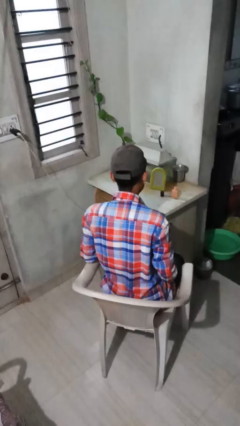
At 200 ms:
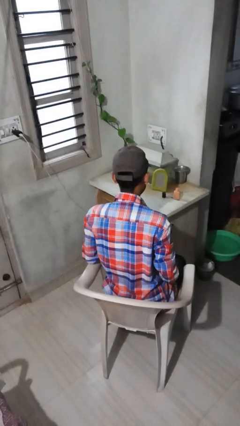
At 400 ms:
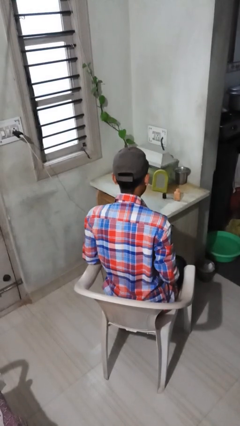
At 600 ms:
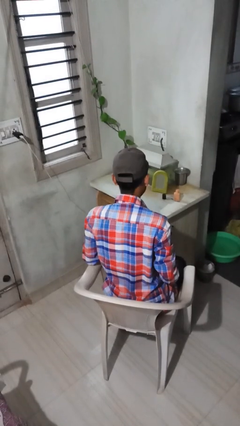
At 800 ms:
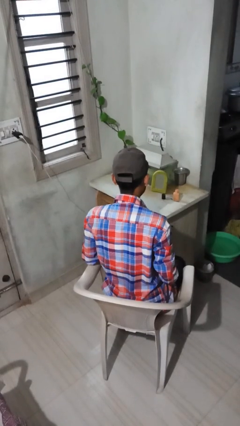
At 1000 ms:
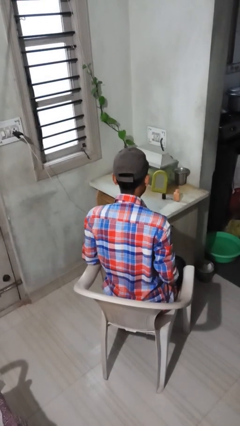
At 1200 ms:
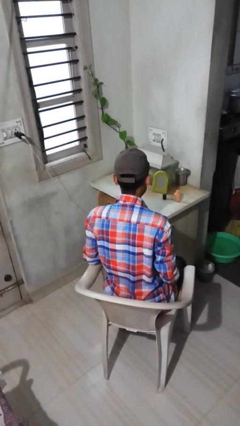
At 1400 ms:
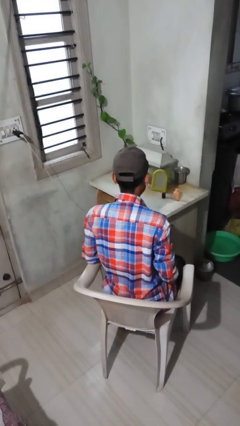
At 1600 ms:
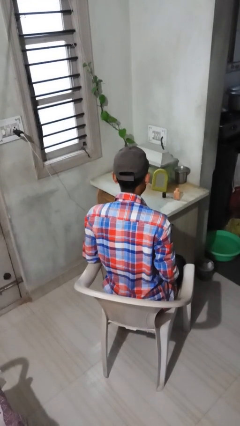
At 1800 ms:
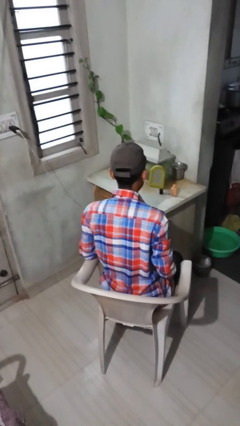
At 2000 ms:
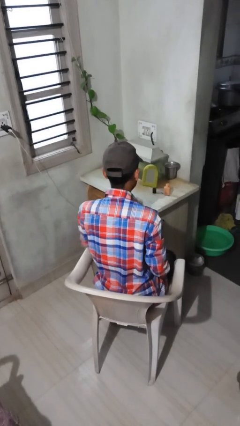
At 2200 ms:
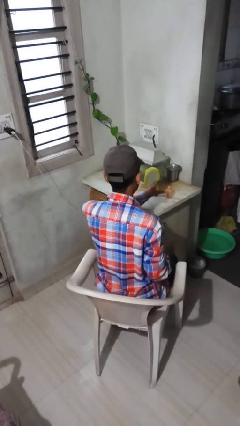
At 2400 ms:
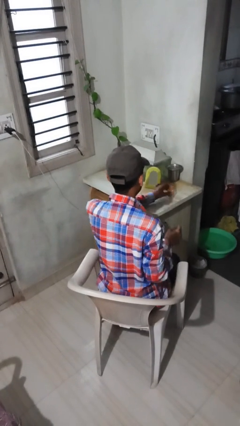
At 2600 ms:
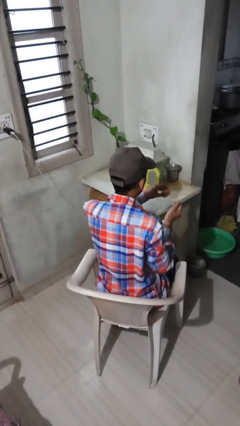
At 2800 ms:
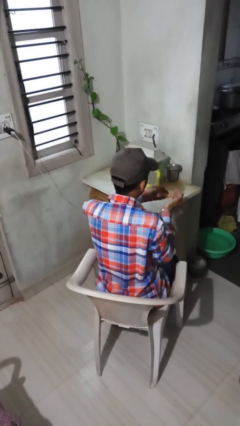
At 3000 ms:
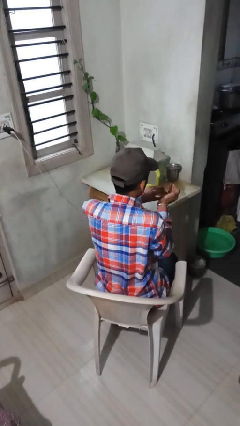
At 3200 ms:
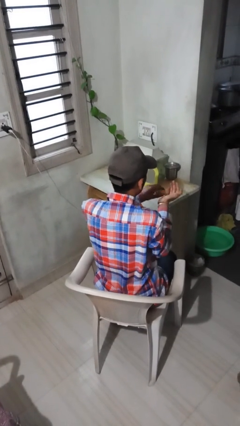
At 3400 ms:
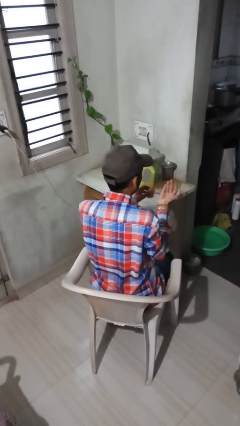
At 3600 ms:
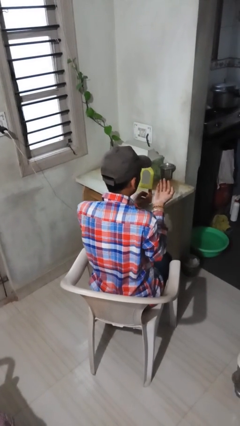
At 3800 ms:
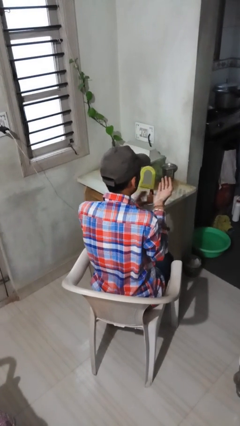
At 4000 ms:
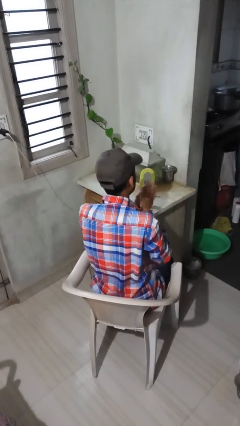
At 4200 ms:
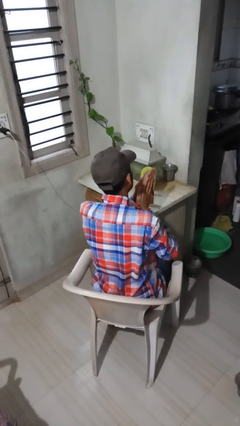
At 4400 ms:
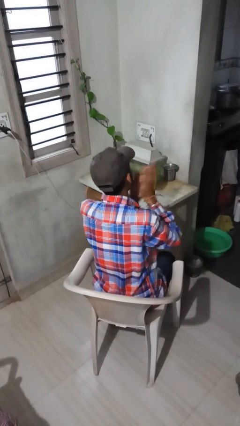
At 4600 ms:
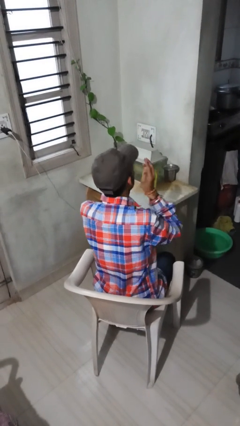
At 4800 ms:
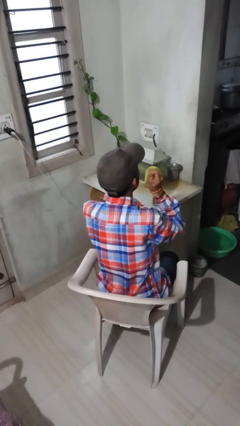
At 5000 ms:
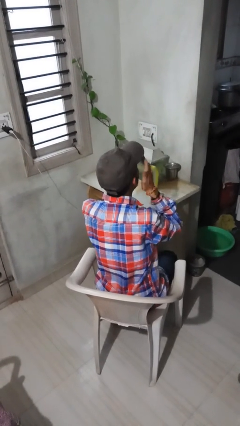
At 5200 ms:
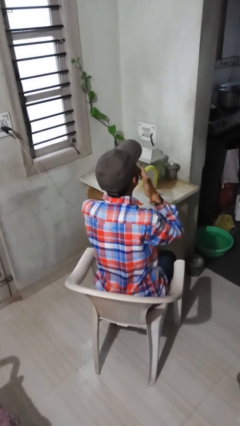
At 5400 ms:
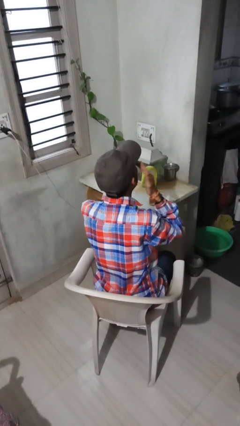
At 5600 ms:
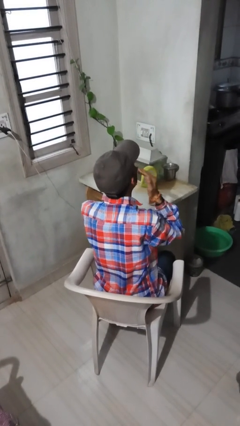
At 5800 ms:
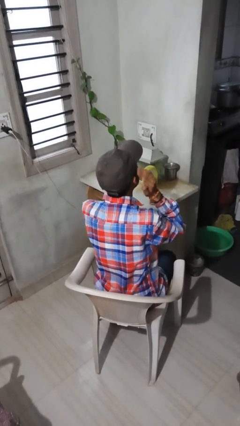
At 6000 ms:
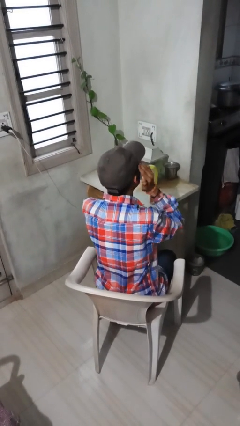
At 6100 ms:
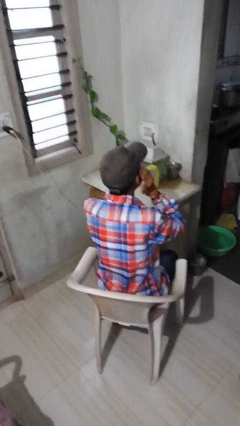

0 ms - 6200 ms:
person applies foundation makeup

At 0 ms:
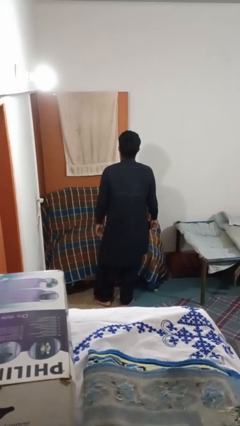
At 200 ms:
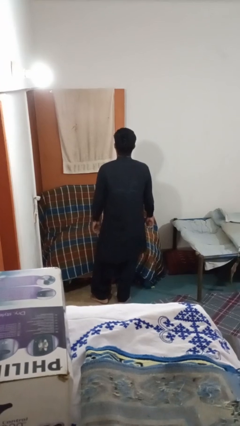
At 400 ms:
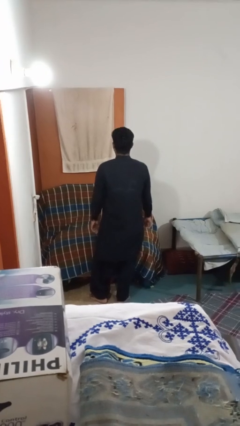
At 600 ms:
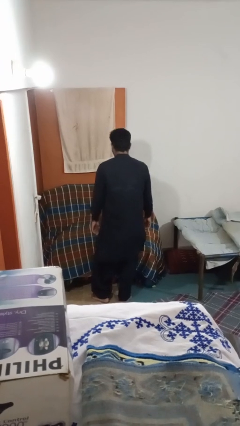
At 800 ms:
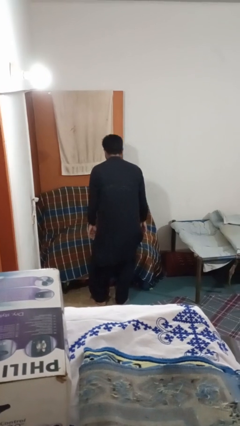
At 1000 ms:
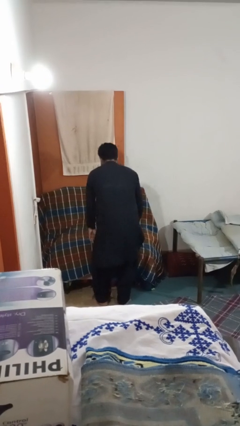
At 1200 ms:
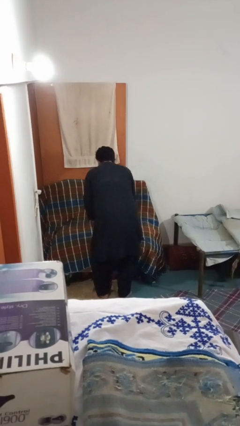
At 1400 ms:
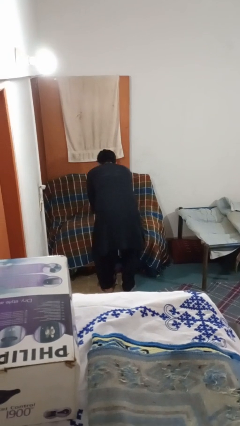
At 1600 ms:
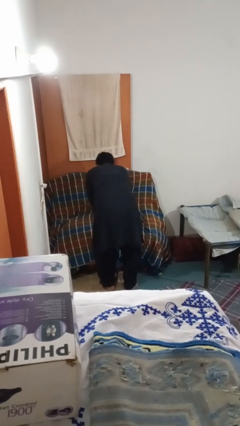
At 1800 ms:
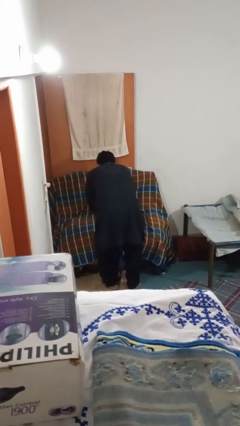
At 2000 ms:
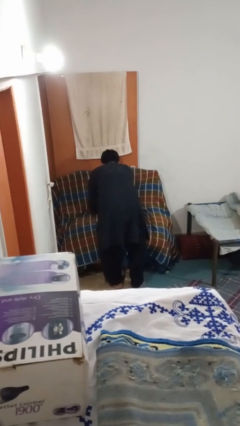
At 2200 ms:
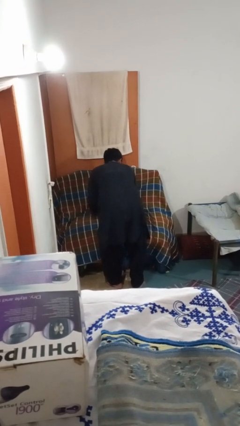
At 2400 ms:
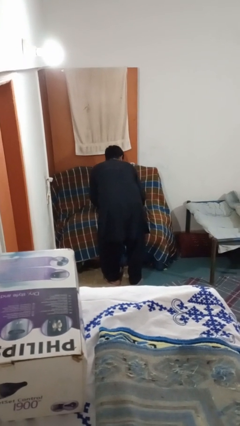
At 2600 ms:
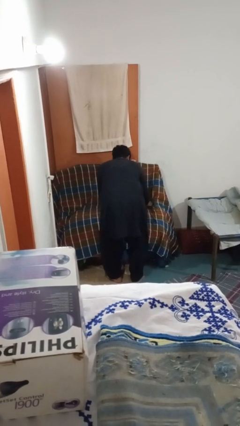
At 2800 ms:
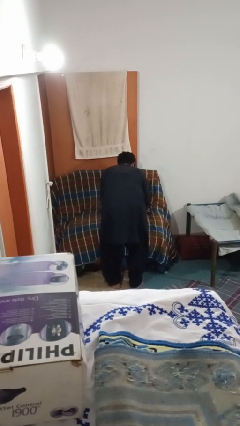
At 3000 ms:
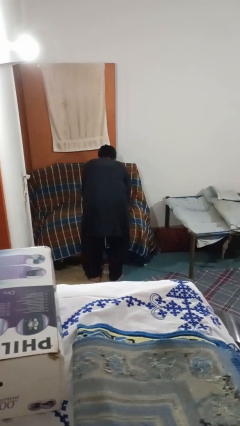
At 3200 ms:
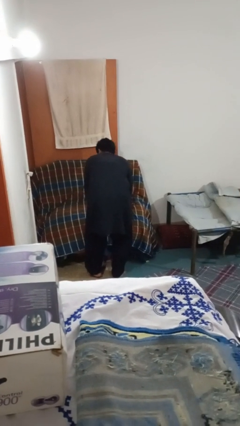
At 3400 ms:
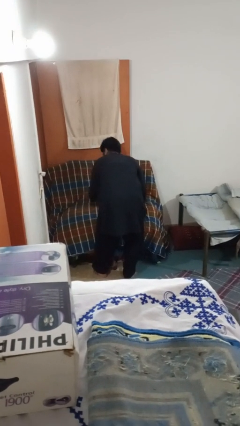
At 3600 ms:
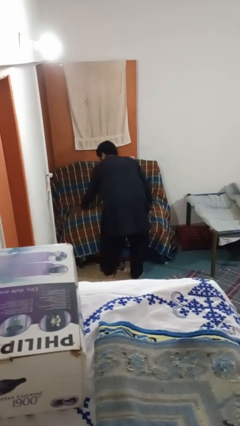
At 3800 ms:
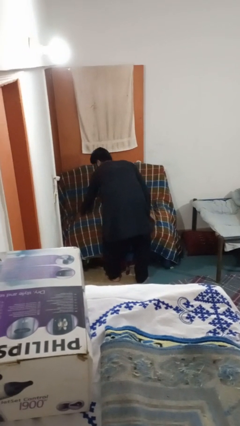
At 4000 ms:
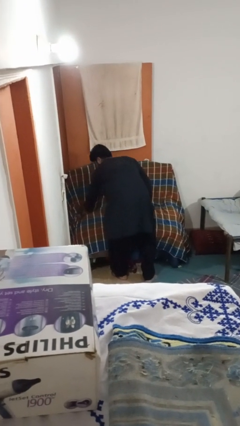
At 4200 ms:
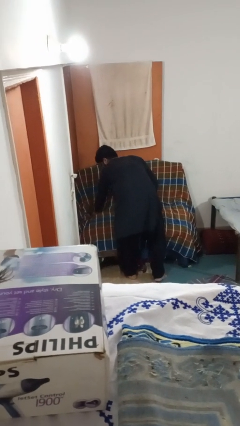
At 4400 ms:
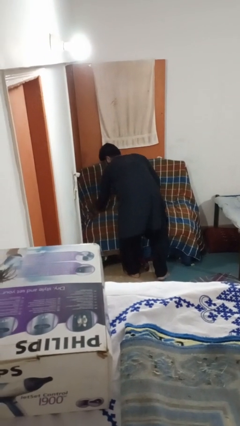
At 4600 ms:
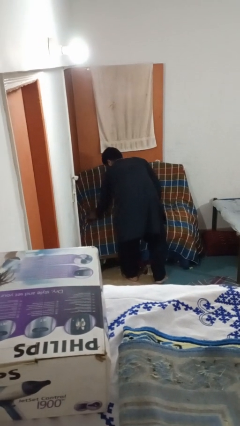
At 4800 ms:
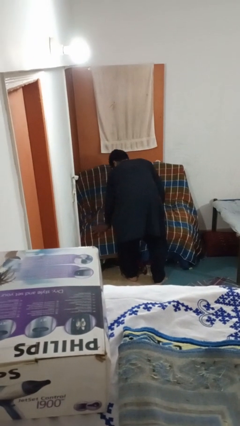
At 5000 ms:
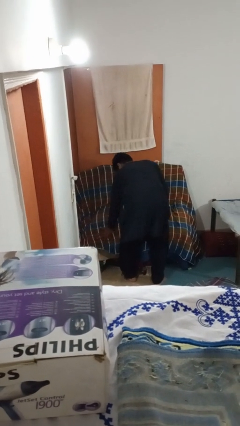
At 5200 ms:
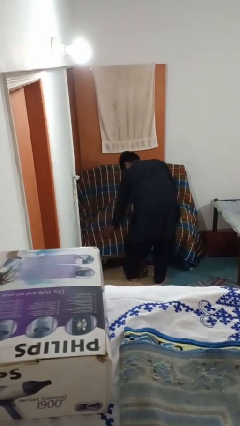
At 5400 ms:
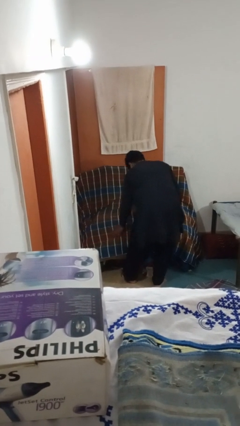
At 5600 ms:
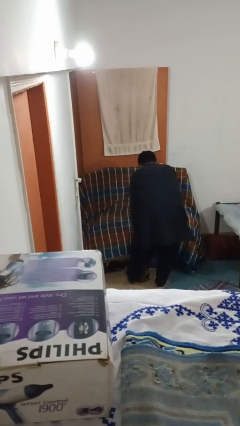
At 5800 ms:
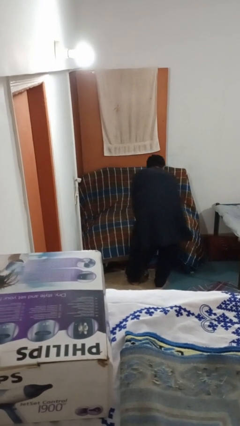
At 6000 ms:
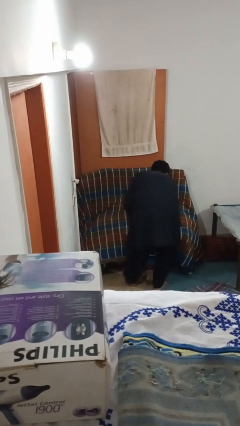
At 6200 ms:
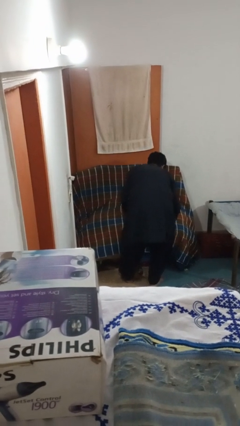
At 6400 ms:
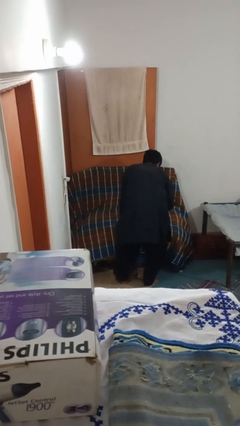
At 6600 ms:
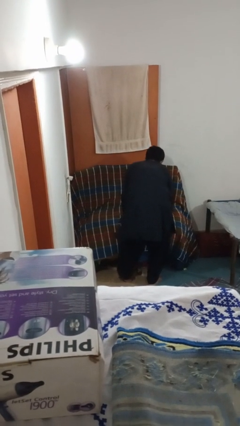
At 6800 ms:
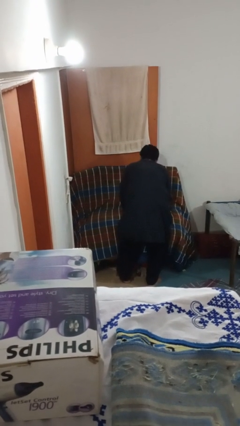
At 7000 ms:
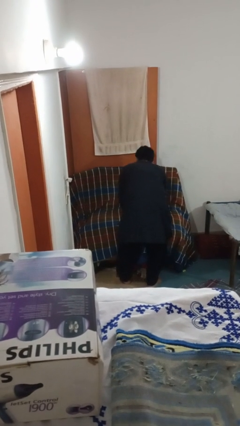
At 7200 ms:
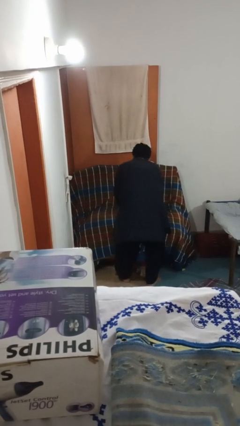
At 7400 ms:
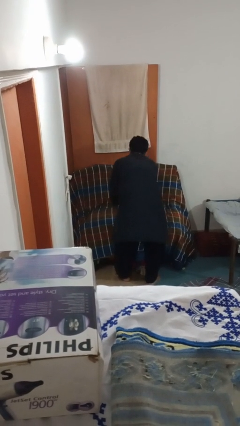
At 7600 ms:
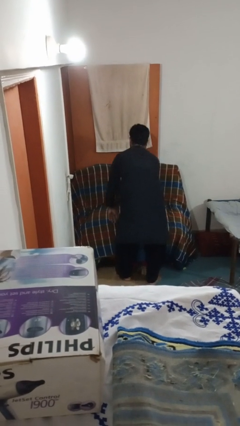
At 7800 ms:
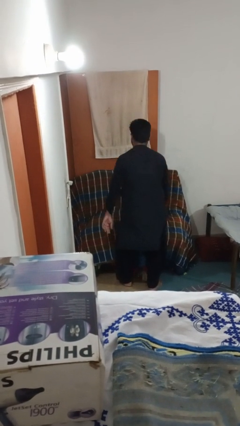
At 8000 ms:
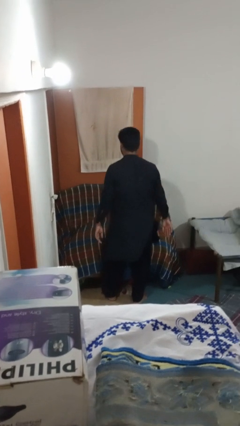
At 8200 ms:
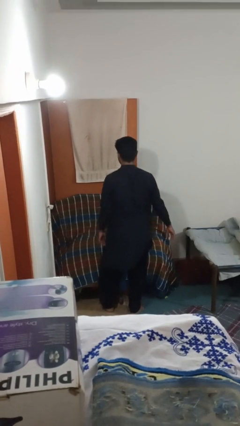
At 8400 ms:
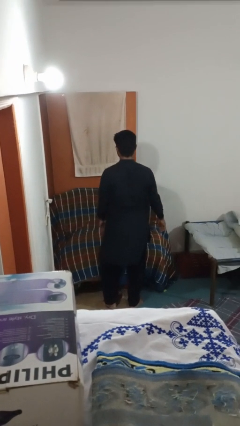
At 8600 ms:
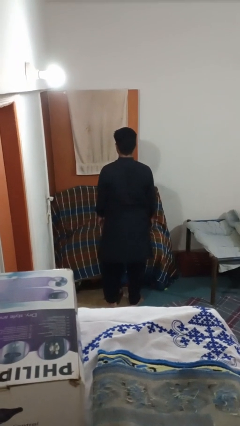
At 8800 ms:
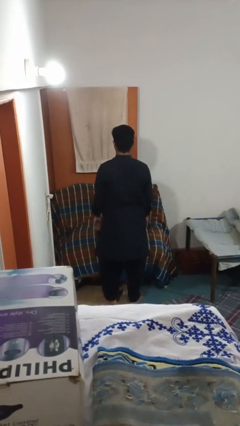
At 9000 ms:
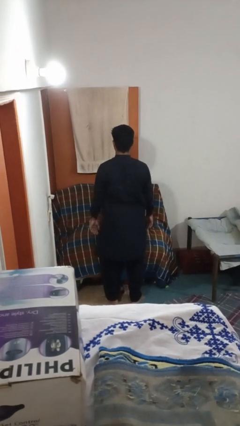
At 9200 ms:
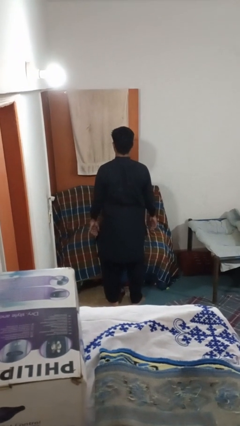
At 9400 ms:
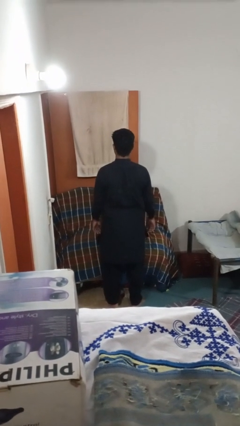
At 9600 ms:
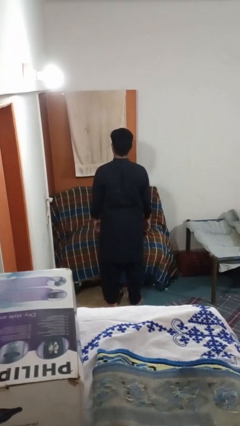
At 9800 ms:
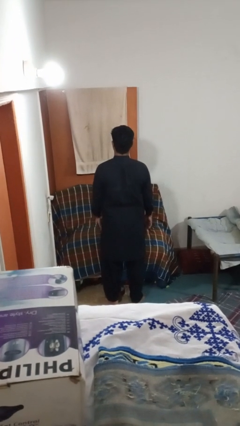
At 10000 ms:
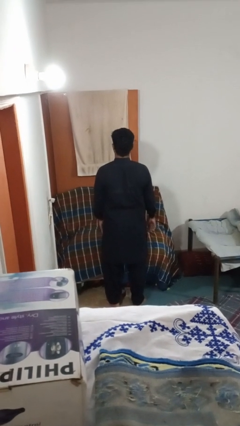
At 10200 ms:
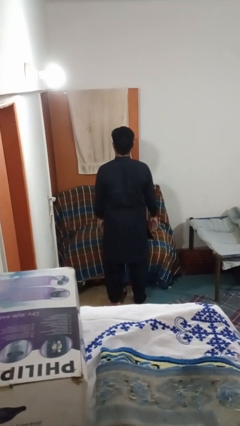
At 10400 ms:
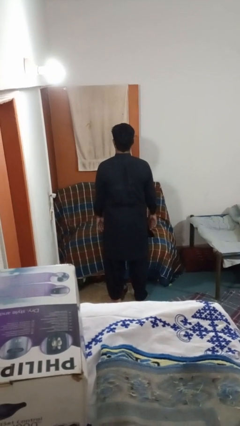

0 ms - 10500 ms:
person searches in couch

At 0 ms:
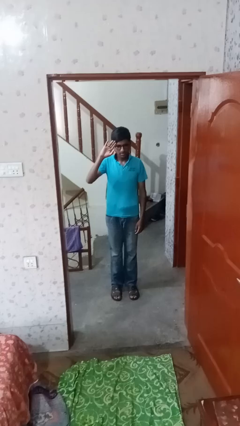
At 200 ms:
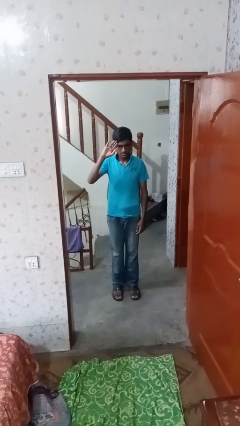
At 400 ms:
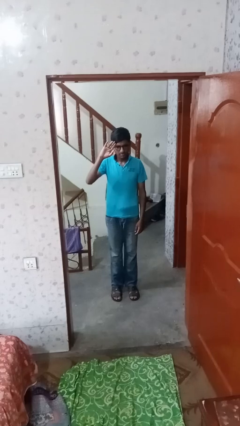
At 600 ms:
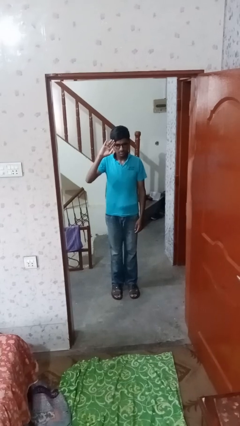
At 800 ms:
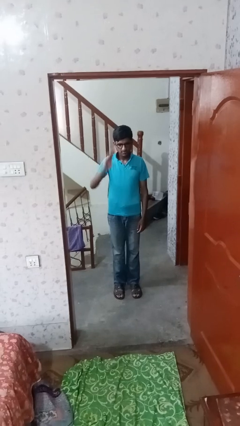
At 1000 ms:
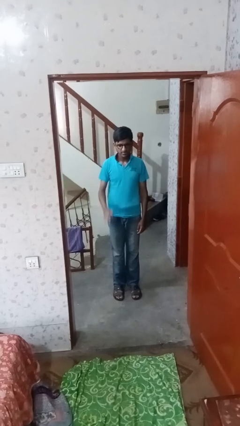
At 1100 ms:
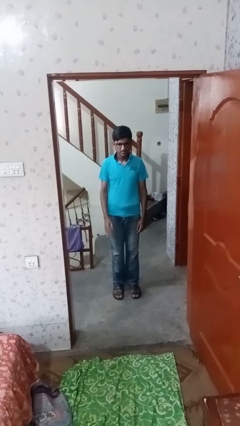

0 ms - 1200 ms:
person salutes

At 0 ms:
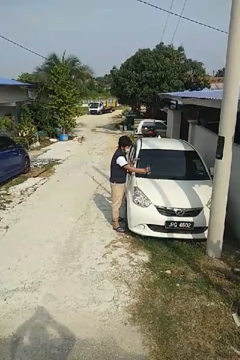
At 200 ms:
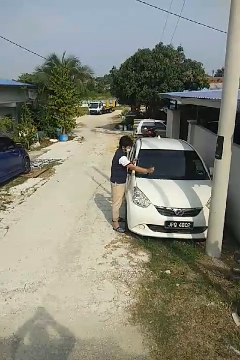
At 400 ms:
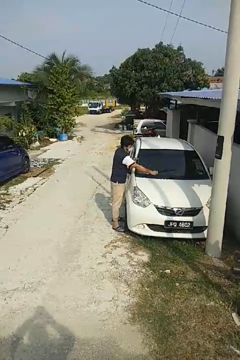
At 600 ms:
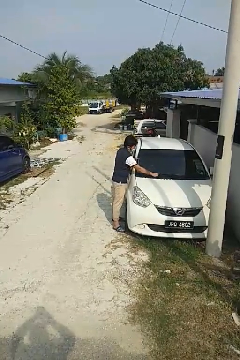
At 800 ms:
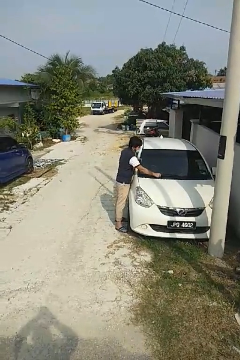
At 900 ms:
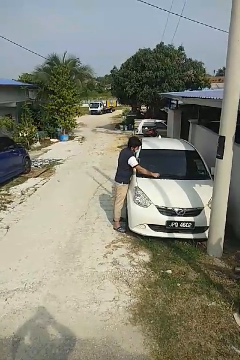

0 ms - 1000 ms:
person flips down car wipers
